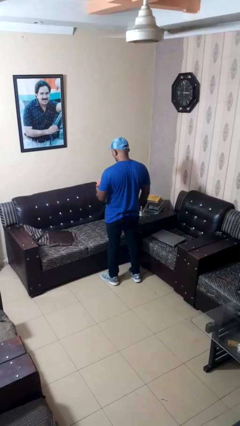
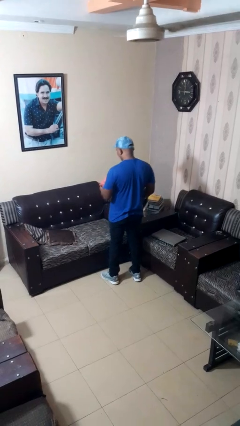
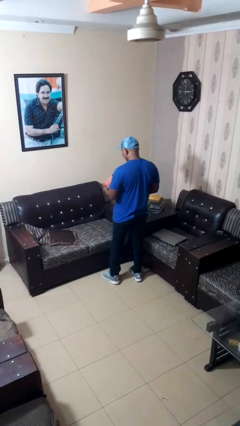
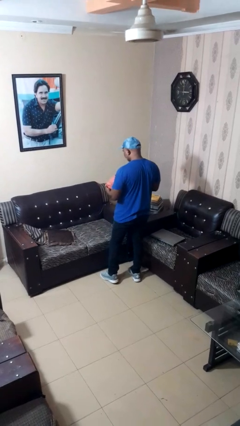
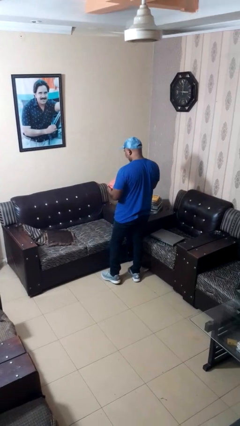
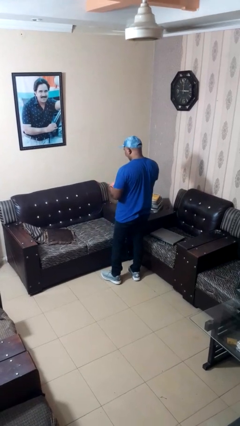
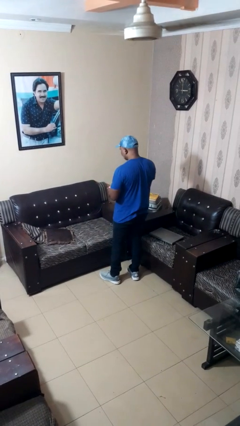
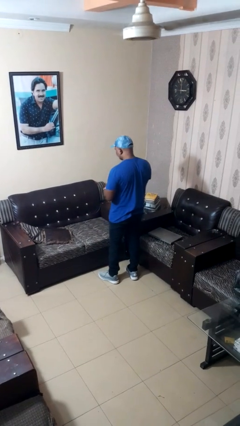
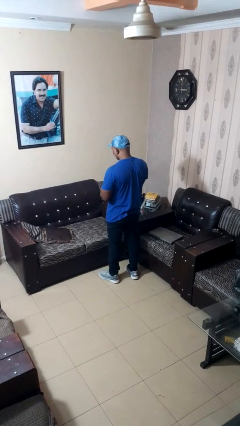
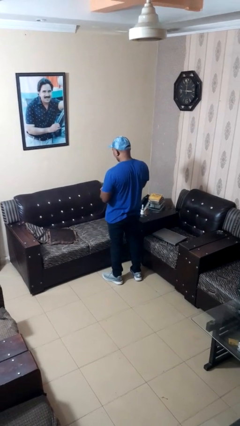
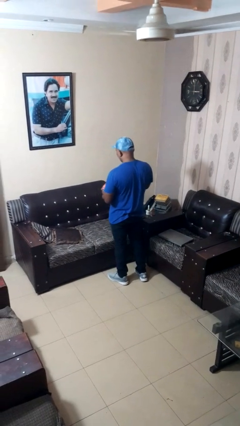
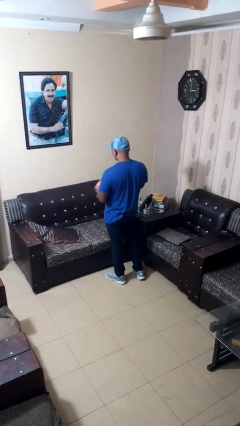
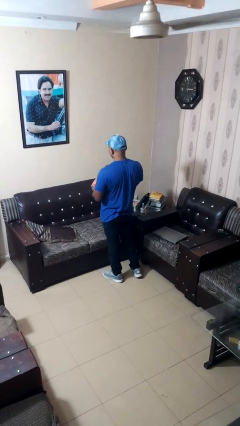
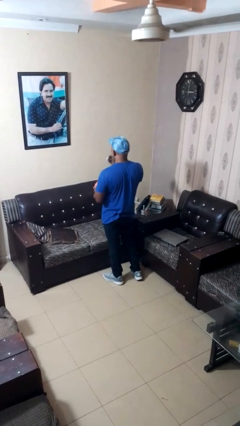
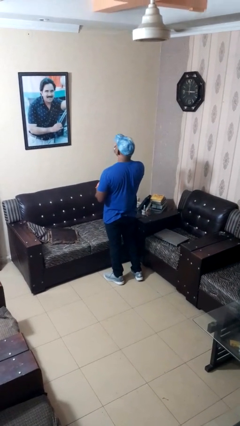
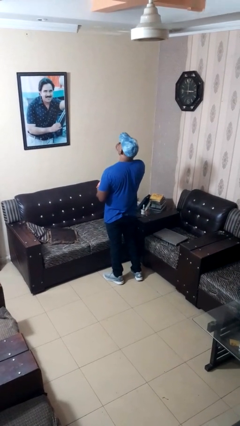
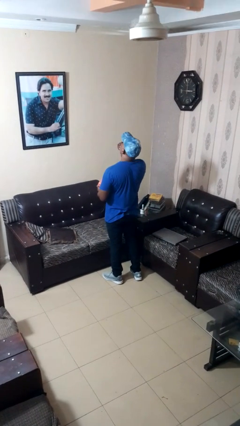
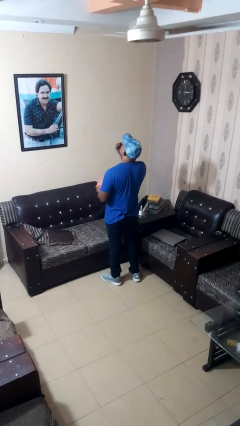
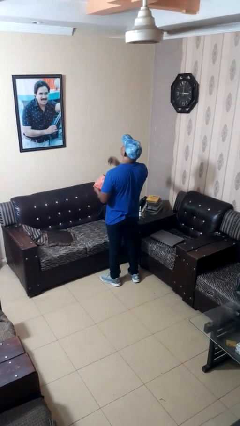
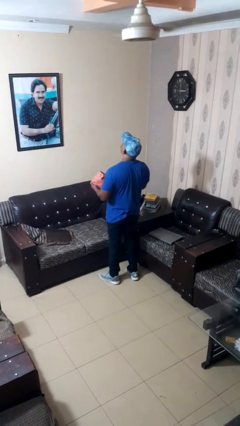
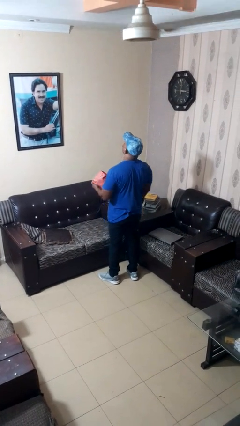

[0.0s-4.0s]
person eats snack from bag

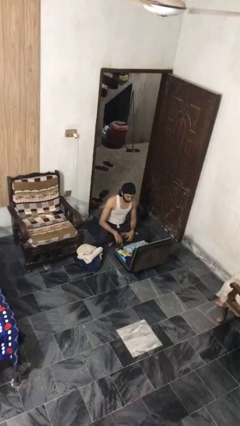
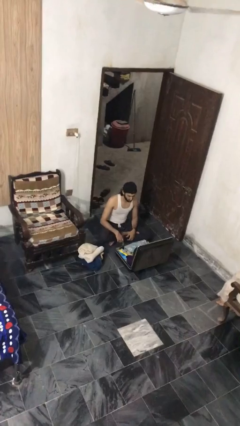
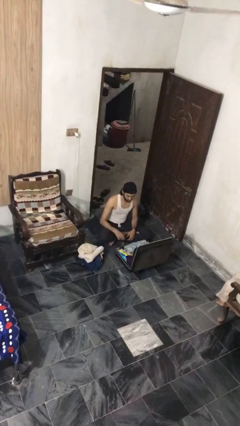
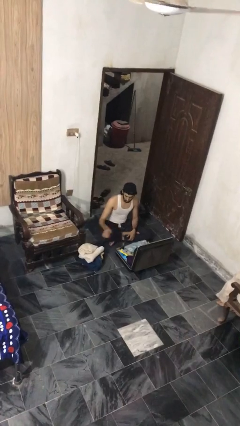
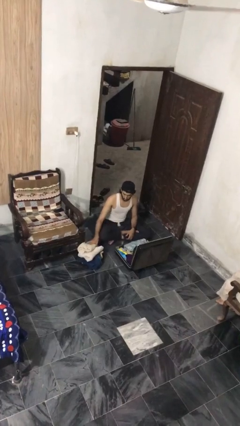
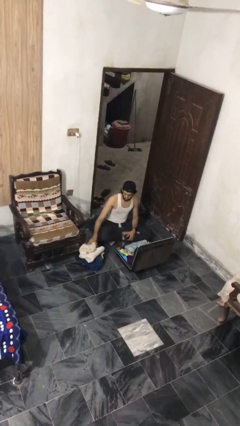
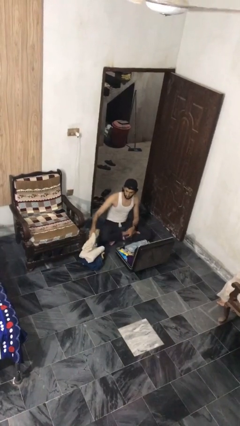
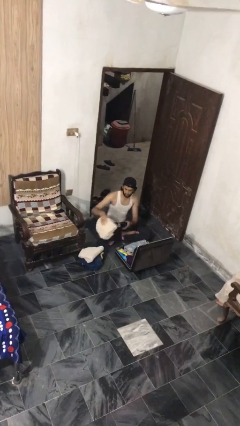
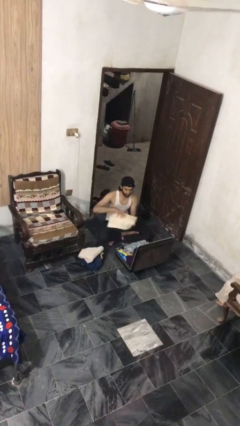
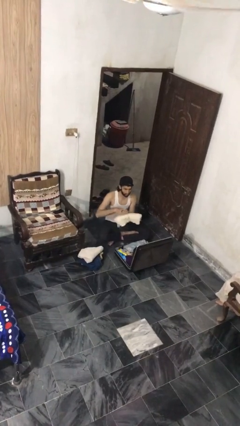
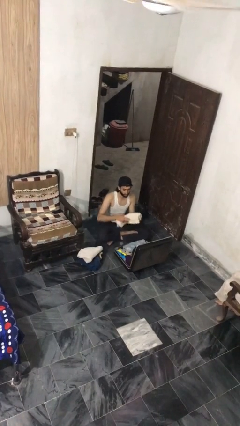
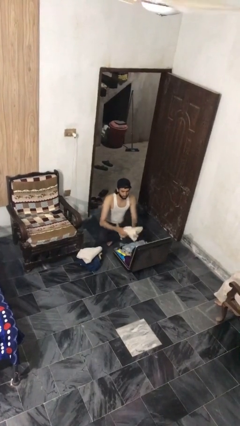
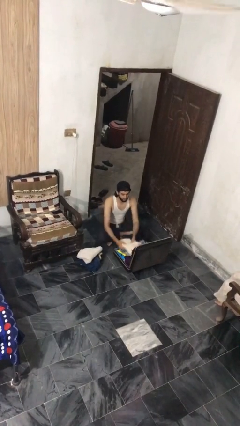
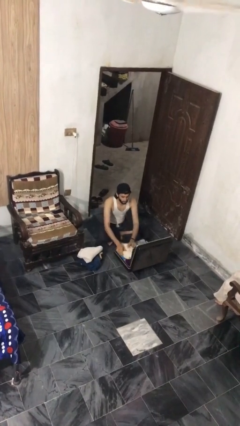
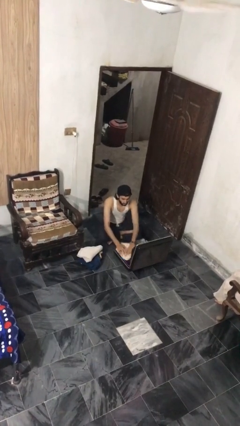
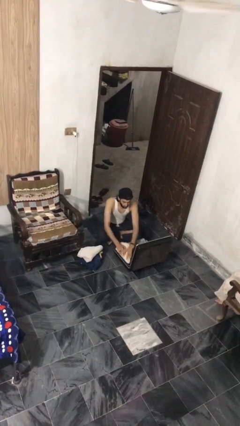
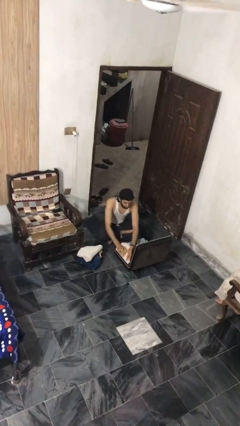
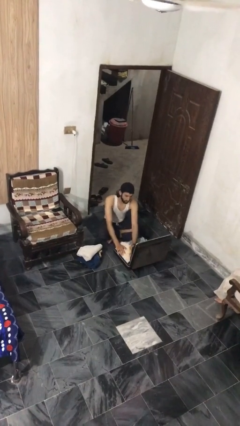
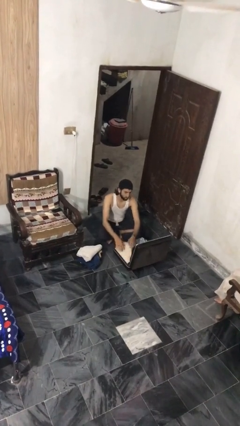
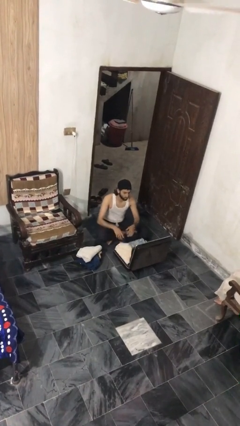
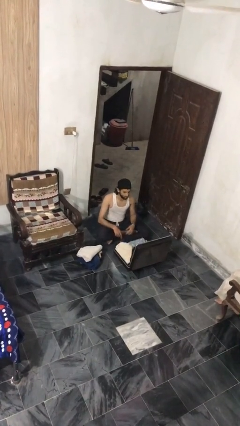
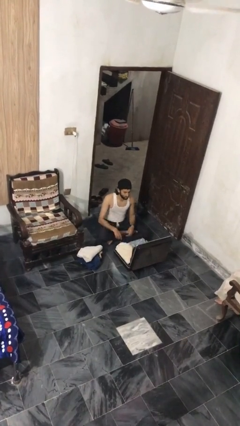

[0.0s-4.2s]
person loads clothes into suitcase

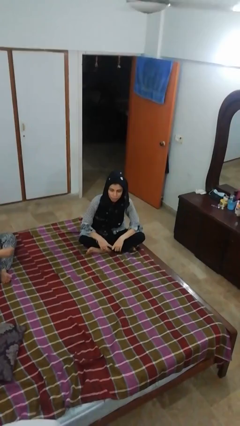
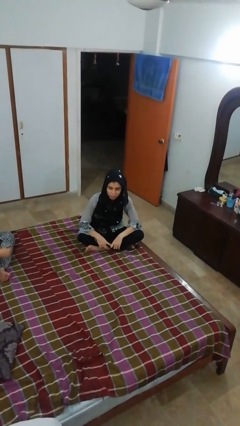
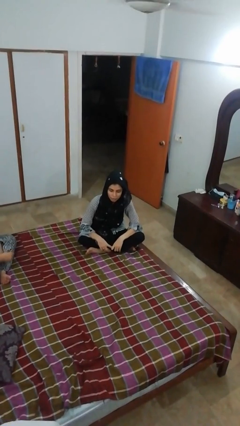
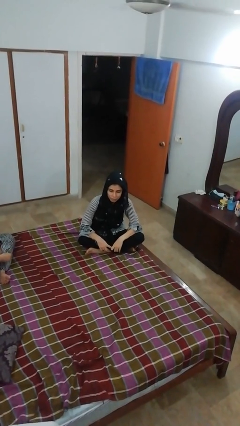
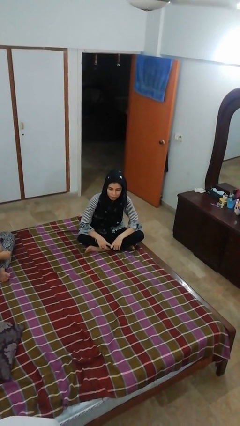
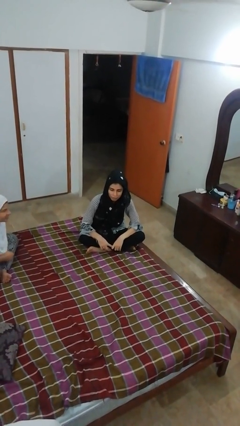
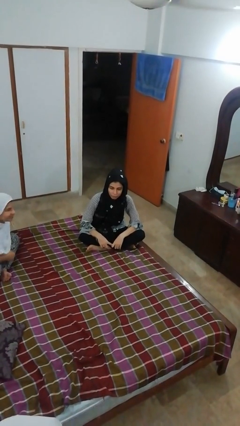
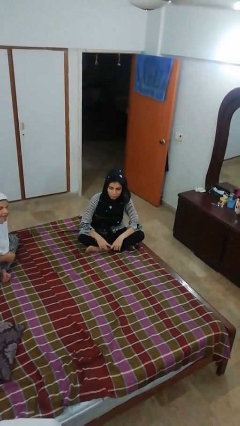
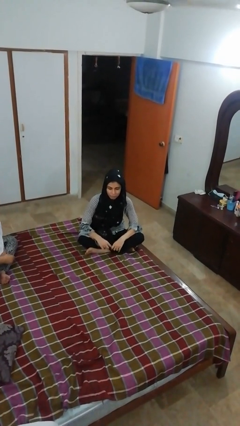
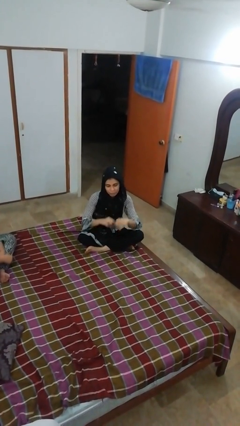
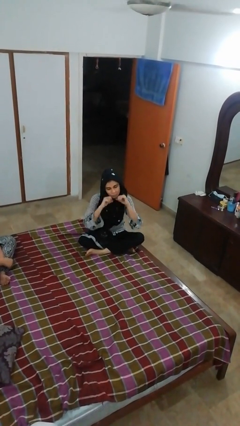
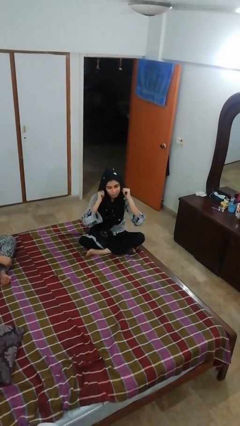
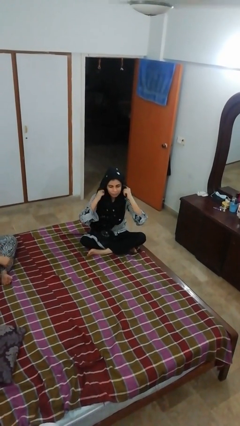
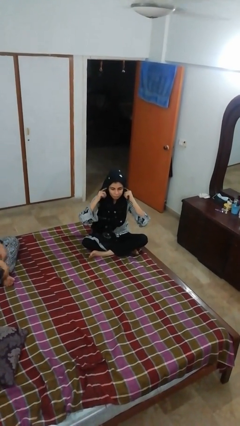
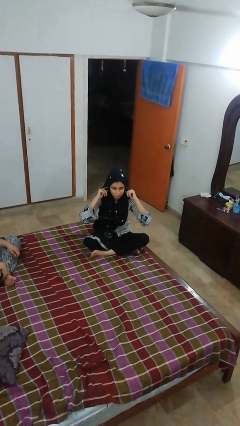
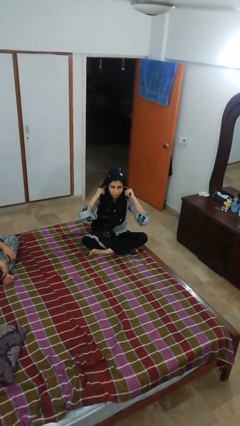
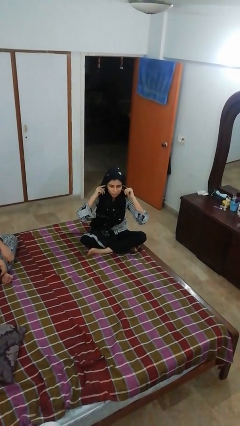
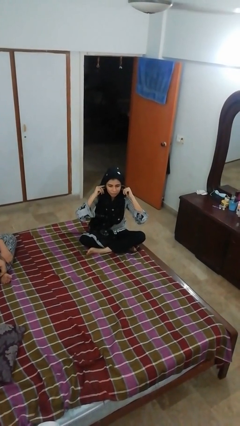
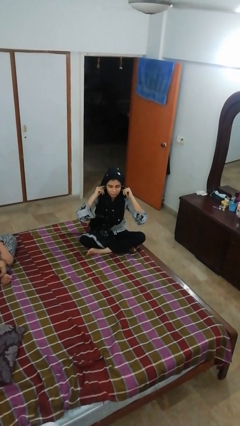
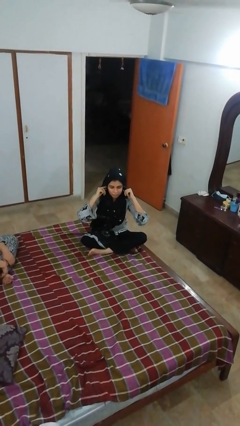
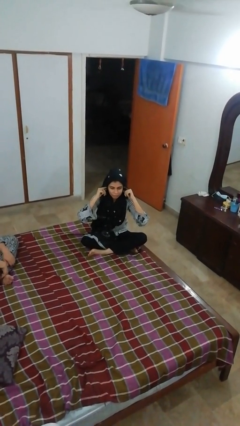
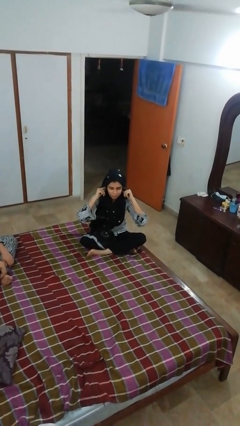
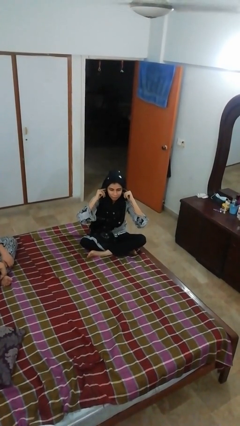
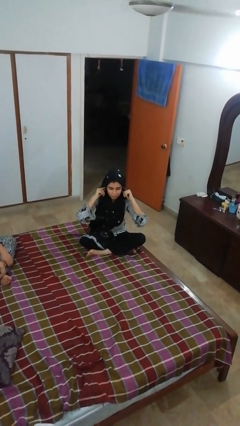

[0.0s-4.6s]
person puts fingers in ear

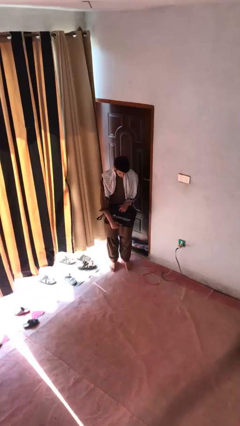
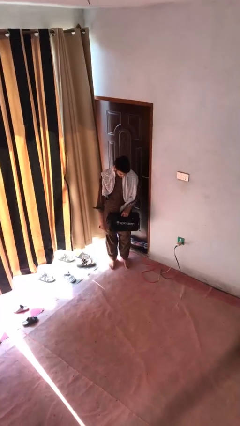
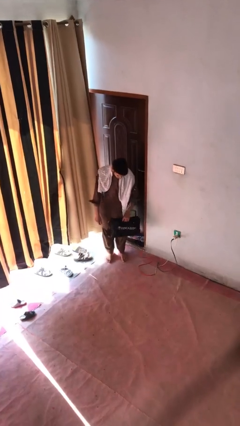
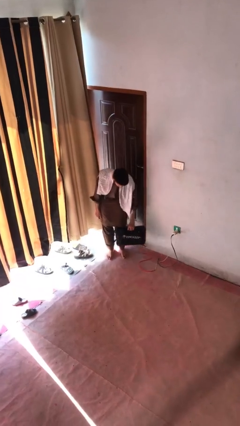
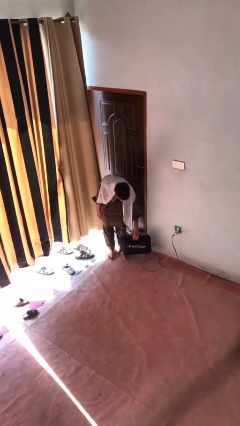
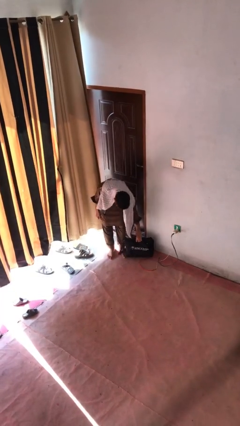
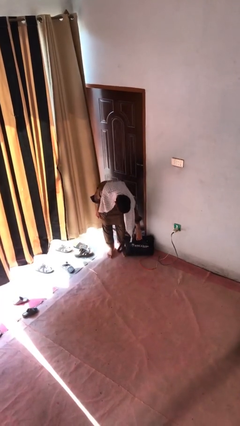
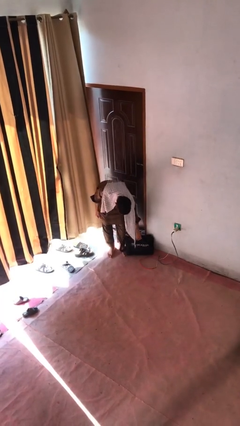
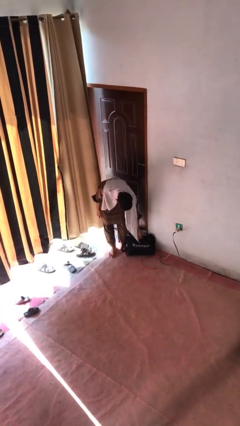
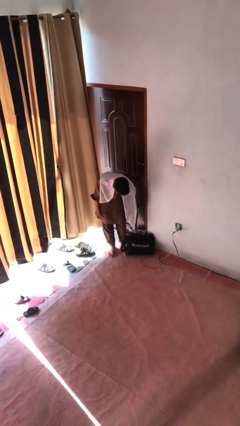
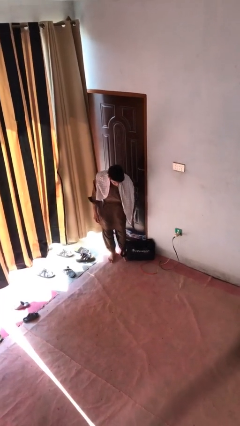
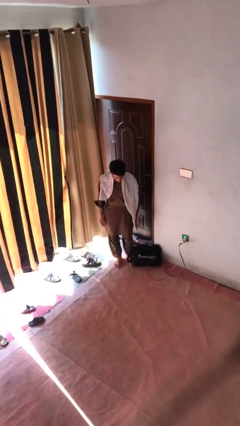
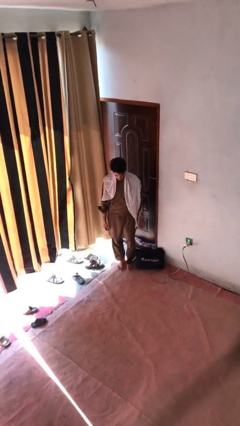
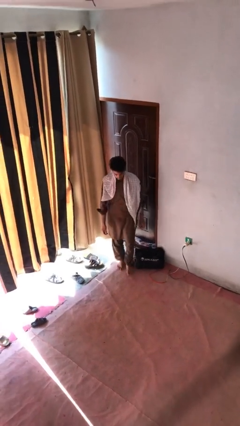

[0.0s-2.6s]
person puts down object on floor

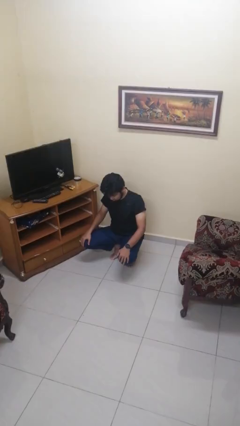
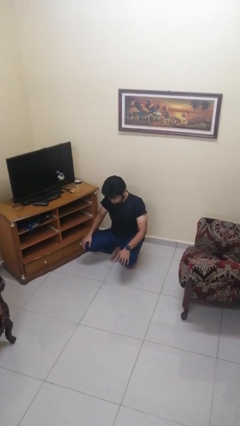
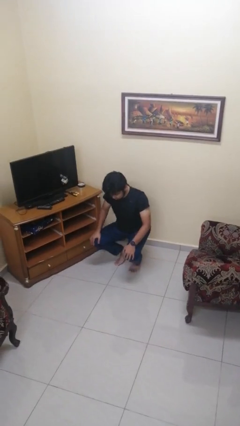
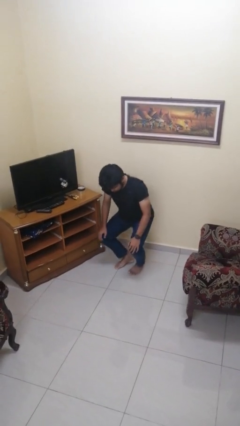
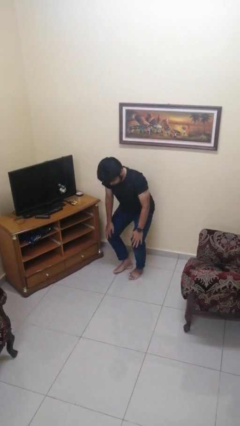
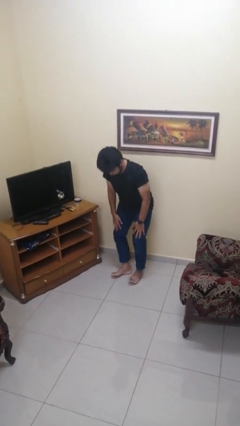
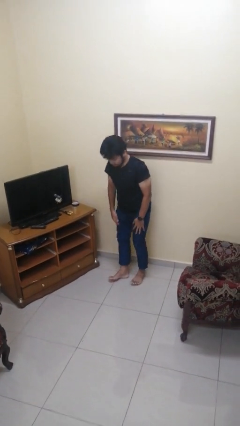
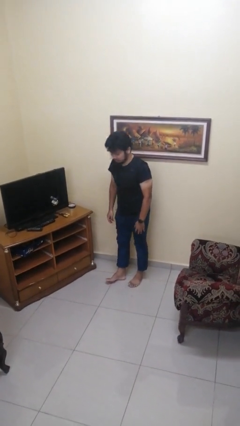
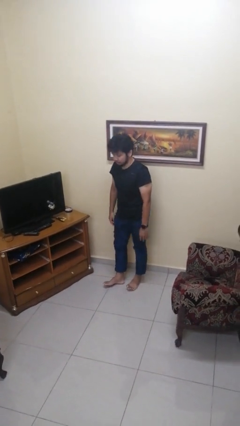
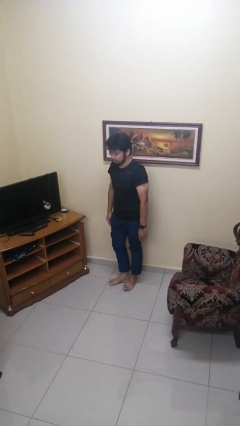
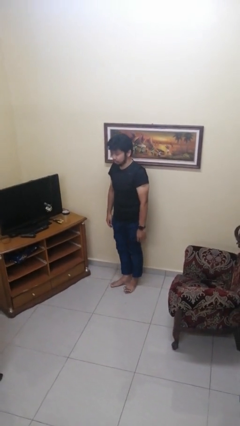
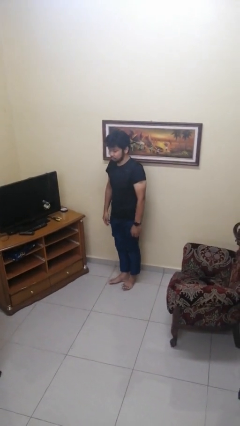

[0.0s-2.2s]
person stands up
